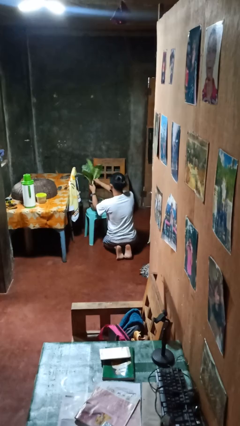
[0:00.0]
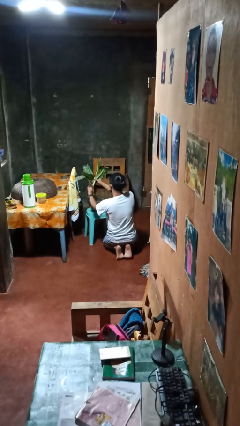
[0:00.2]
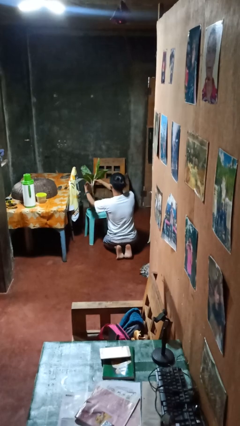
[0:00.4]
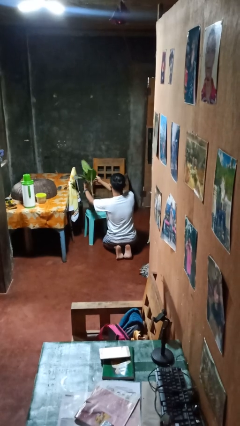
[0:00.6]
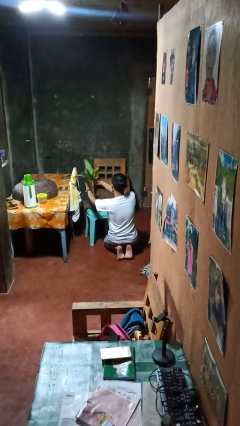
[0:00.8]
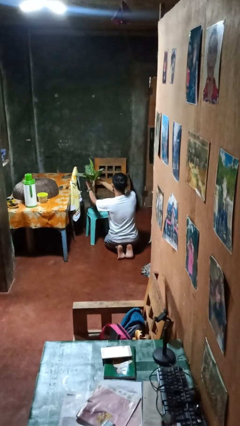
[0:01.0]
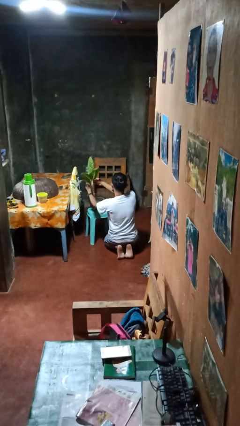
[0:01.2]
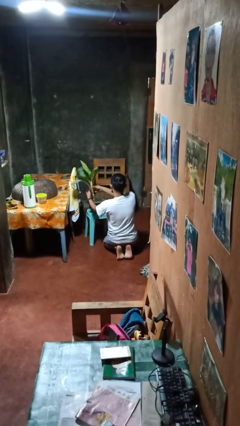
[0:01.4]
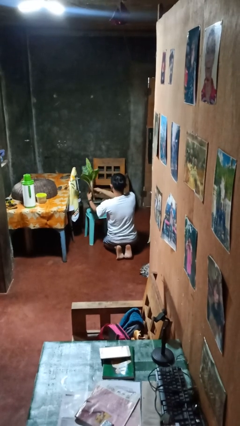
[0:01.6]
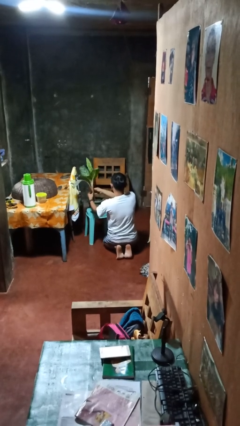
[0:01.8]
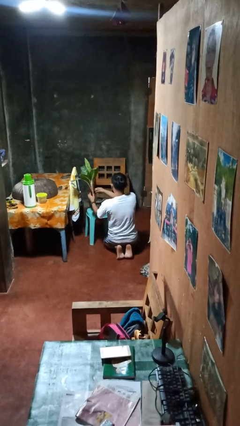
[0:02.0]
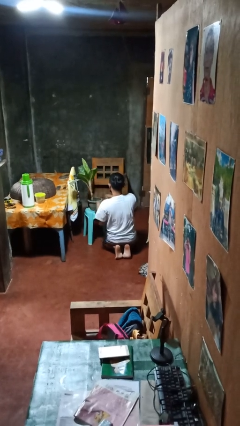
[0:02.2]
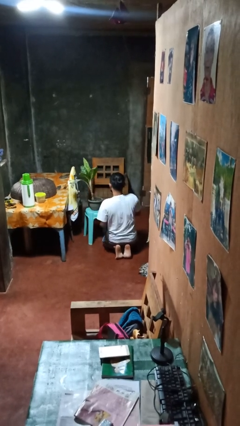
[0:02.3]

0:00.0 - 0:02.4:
person arranges flowers in vase

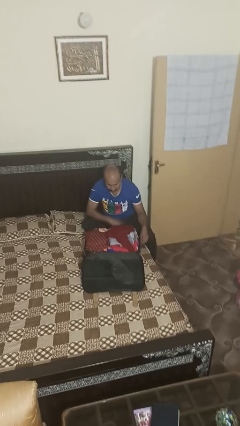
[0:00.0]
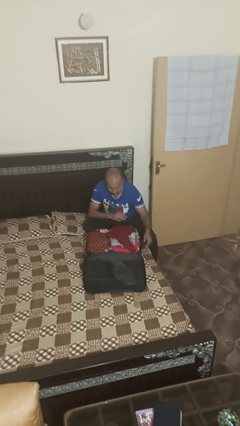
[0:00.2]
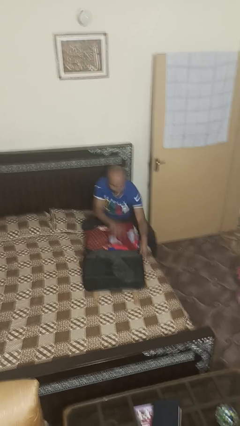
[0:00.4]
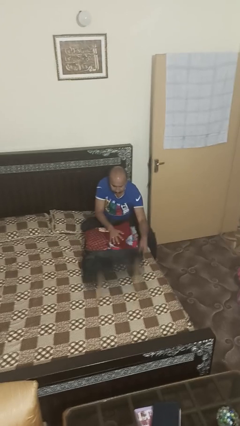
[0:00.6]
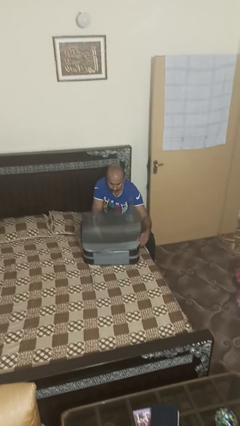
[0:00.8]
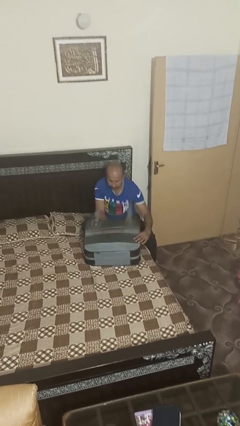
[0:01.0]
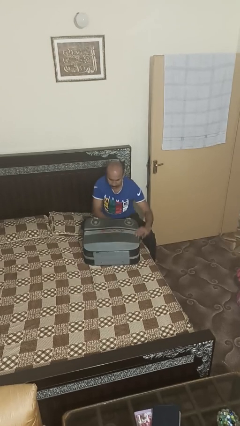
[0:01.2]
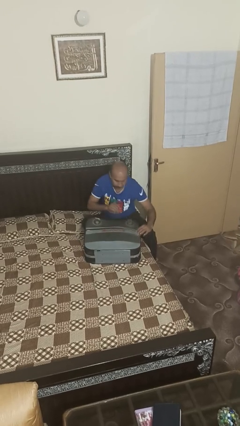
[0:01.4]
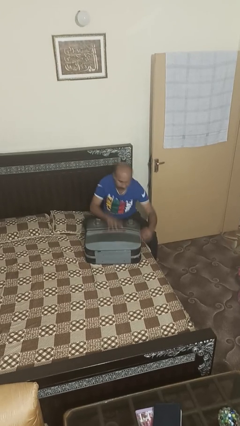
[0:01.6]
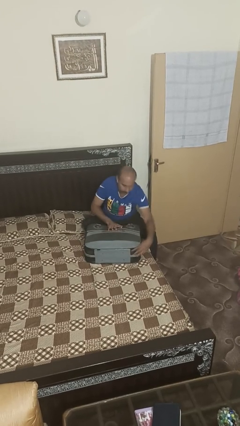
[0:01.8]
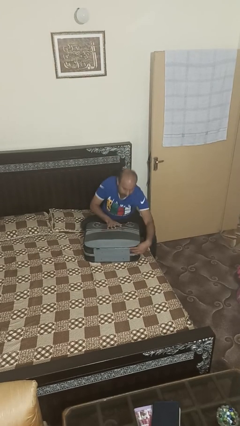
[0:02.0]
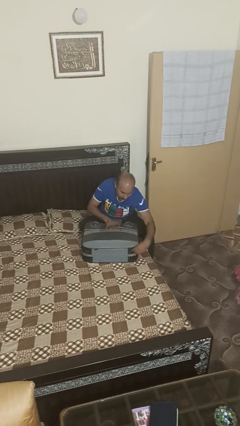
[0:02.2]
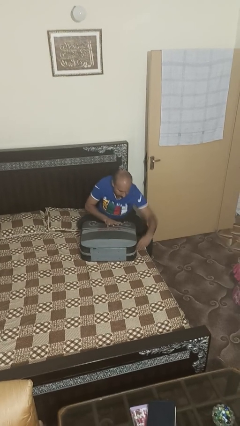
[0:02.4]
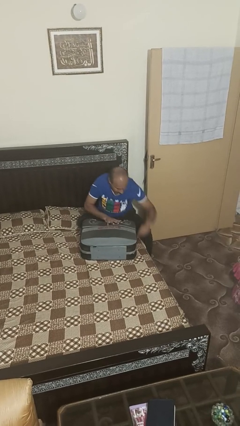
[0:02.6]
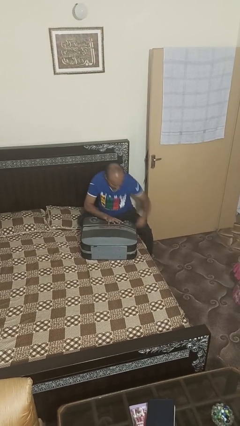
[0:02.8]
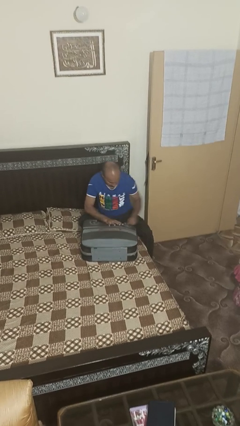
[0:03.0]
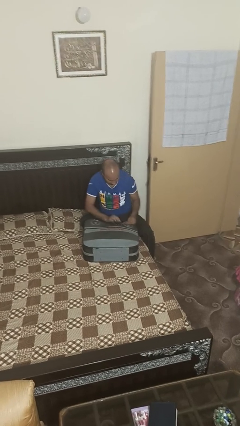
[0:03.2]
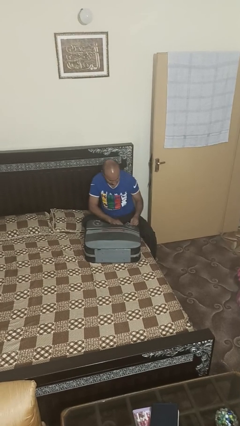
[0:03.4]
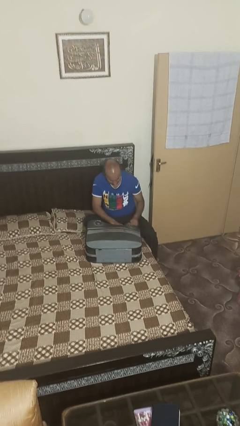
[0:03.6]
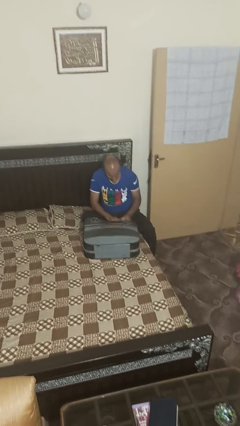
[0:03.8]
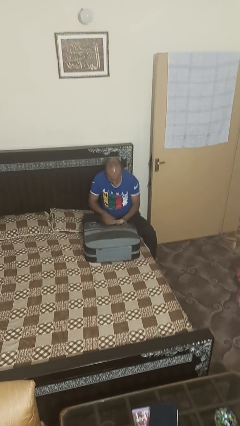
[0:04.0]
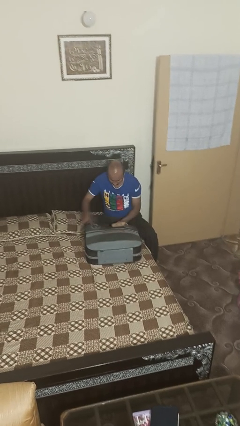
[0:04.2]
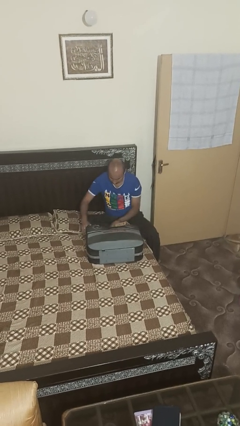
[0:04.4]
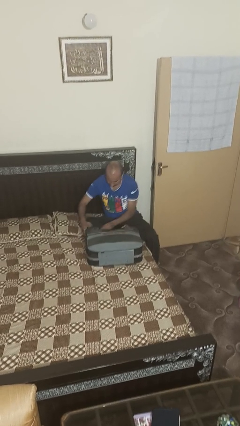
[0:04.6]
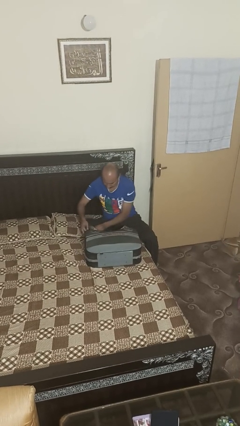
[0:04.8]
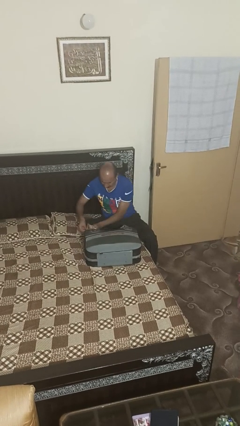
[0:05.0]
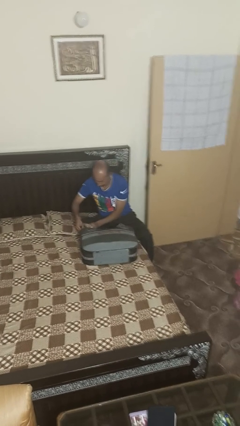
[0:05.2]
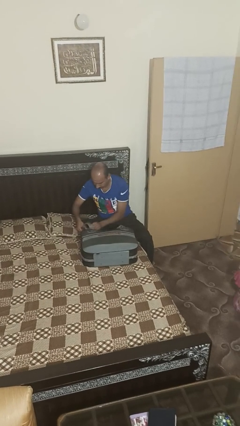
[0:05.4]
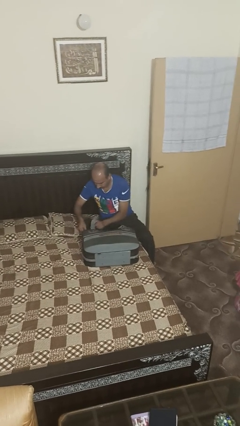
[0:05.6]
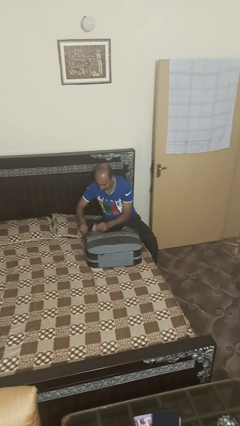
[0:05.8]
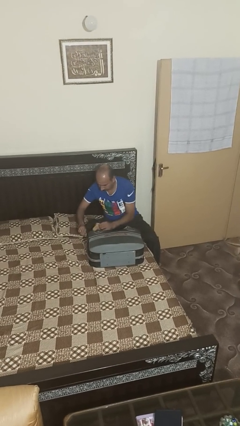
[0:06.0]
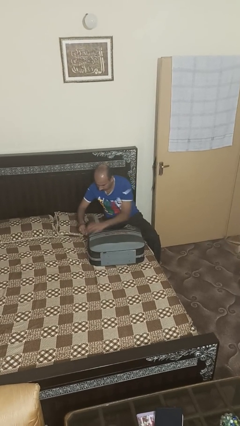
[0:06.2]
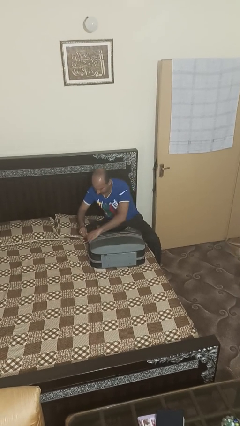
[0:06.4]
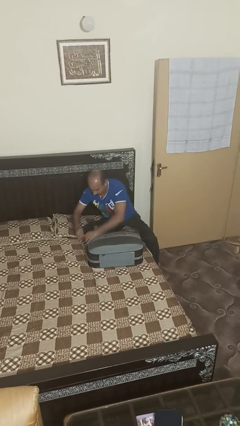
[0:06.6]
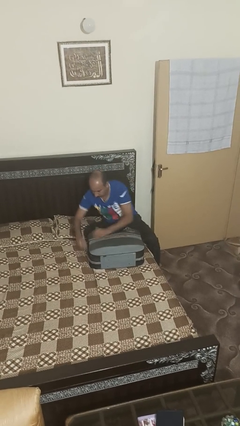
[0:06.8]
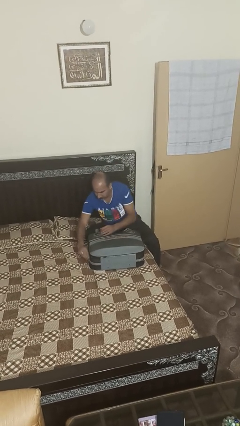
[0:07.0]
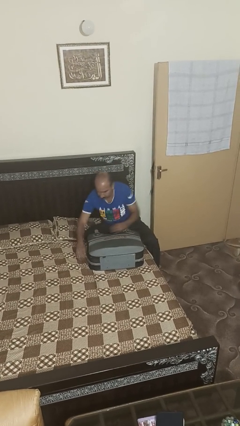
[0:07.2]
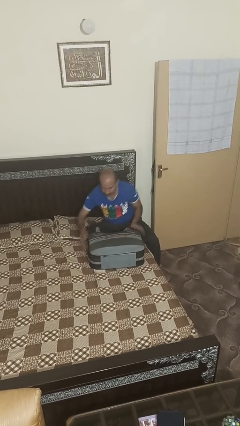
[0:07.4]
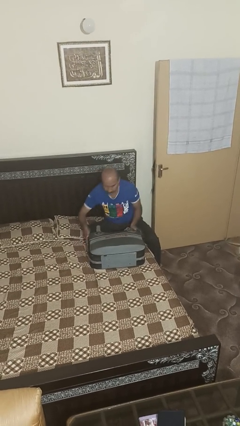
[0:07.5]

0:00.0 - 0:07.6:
person closes suitcase

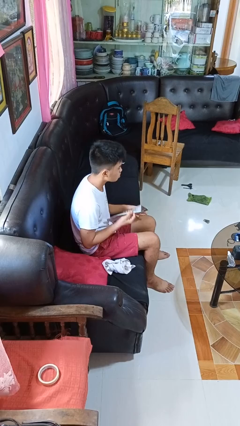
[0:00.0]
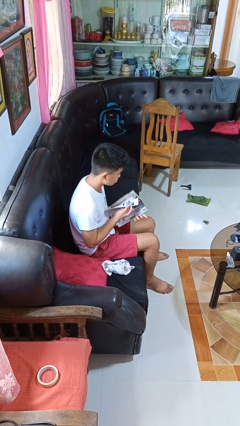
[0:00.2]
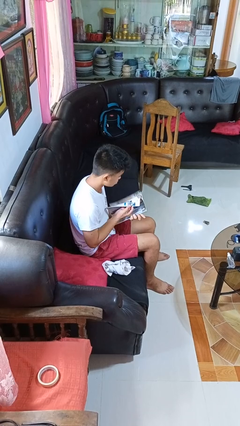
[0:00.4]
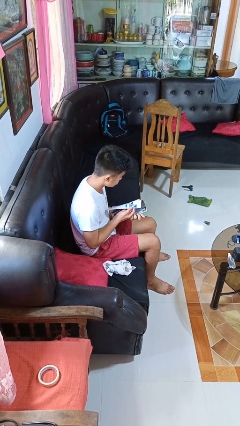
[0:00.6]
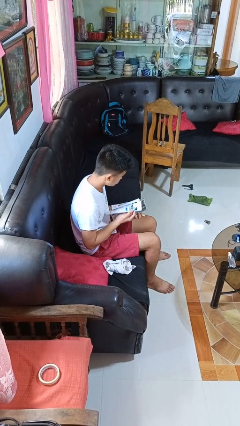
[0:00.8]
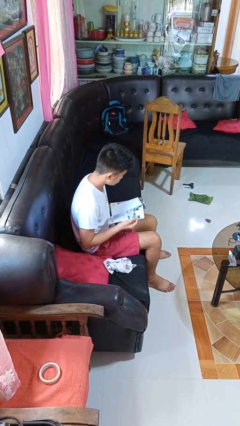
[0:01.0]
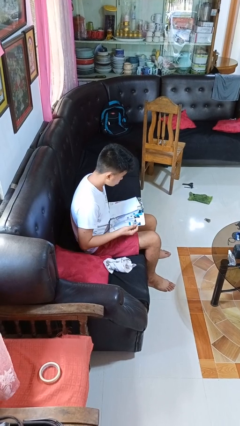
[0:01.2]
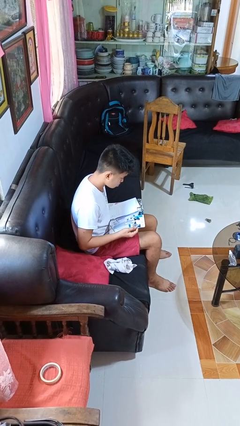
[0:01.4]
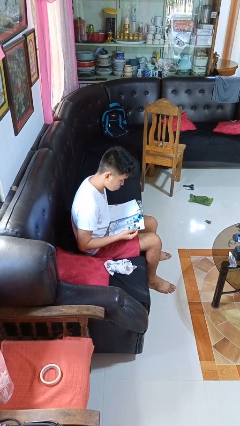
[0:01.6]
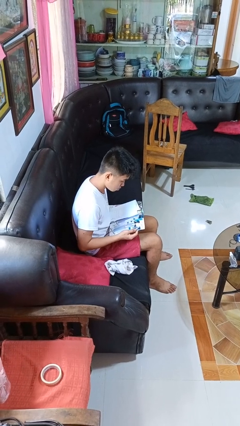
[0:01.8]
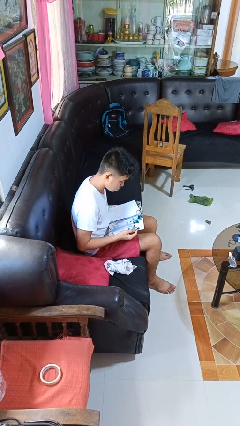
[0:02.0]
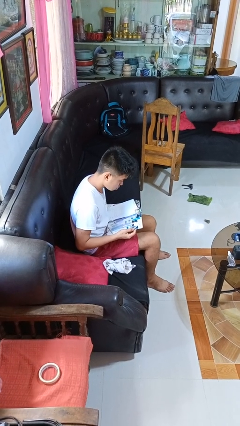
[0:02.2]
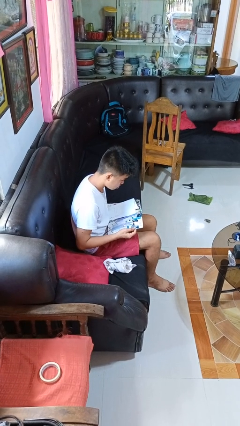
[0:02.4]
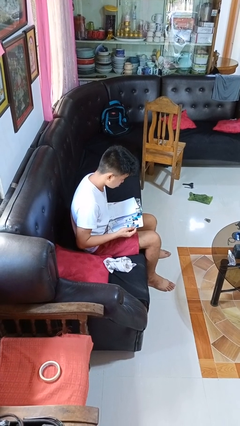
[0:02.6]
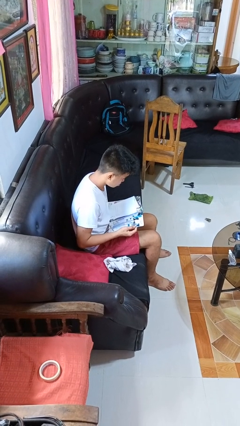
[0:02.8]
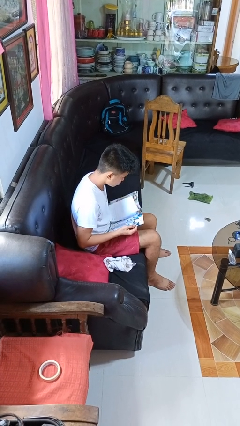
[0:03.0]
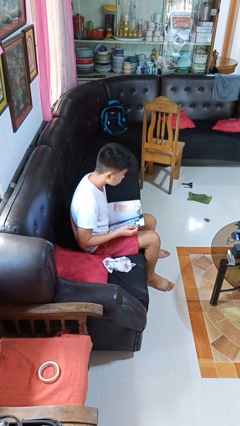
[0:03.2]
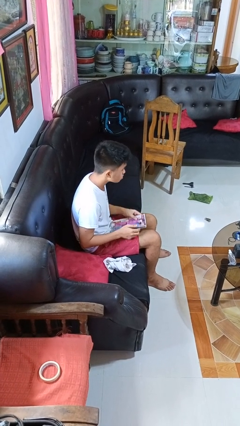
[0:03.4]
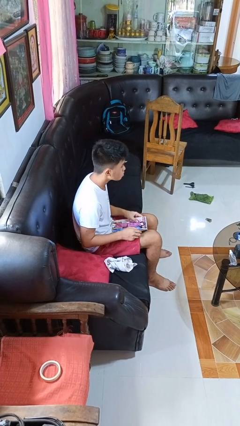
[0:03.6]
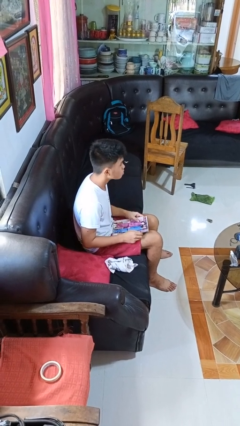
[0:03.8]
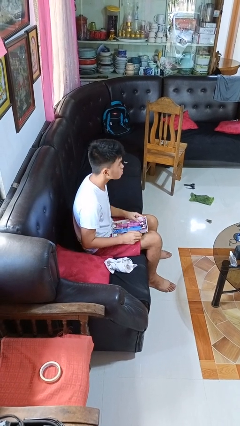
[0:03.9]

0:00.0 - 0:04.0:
person reads magazine

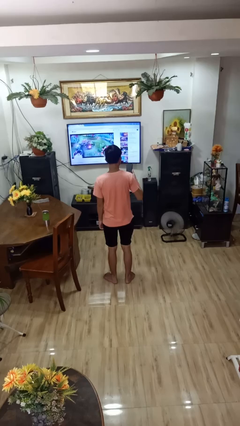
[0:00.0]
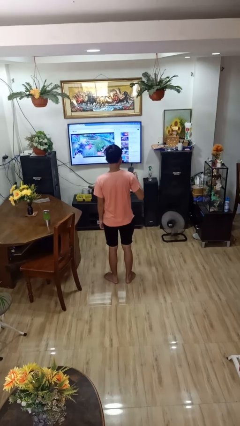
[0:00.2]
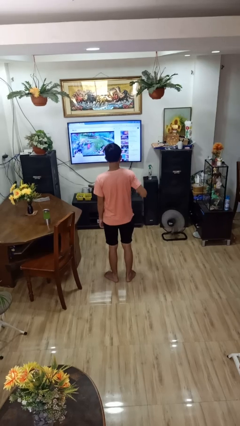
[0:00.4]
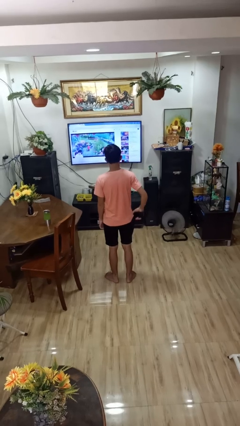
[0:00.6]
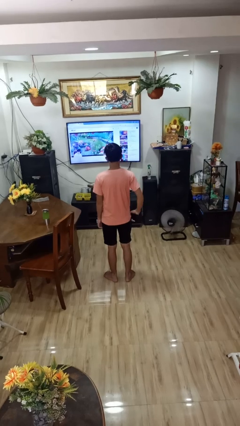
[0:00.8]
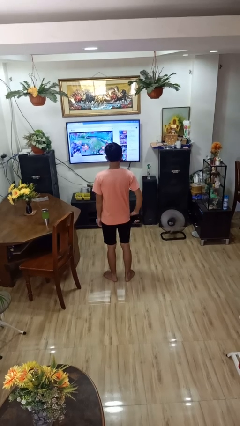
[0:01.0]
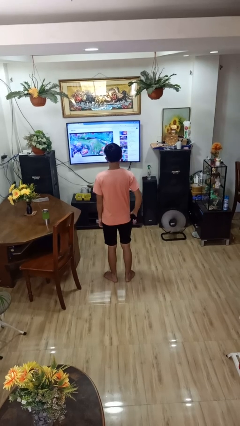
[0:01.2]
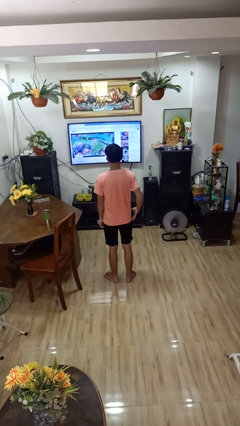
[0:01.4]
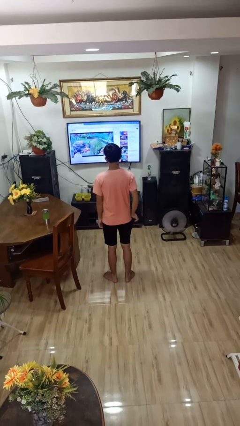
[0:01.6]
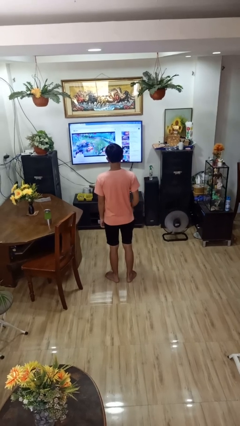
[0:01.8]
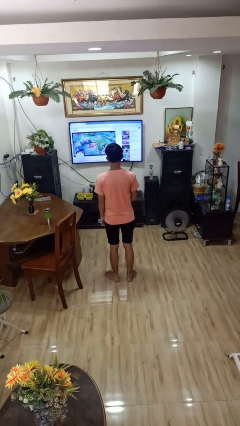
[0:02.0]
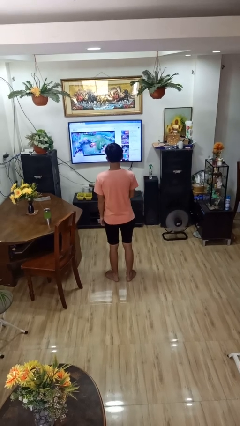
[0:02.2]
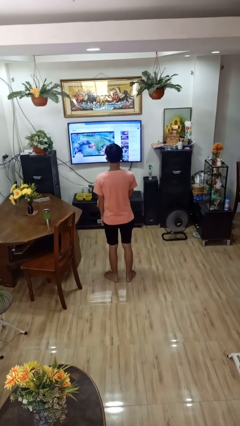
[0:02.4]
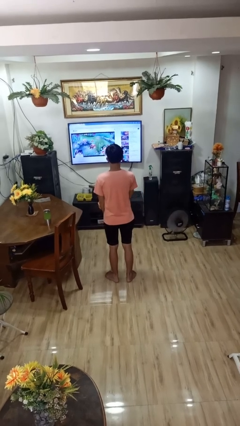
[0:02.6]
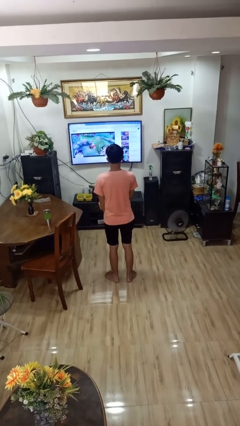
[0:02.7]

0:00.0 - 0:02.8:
person puts phone into pocket

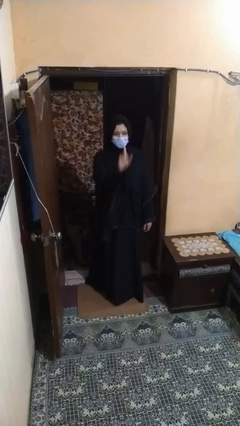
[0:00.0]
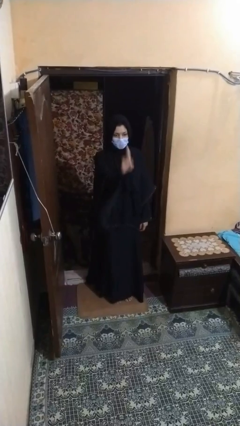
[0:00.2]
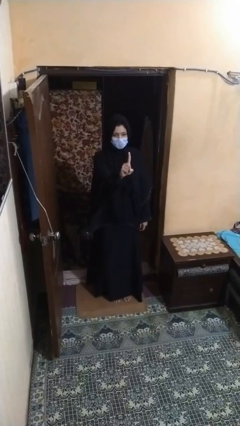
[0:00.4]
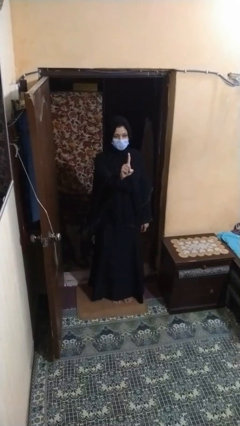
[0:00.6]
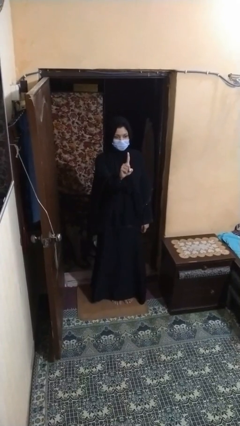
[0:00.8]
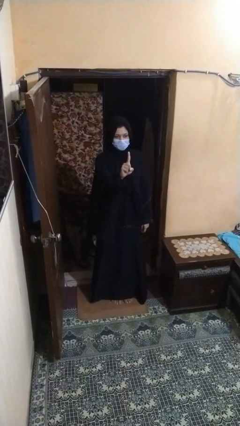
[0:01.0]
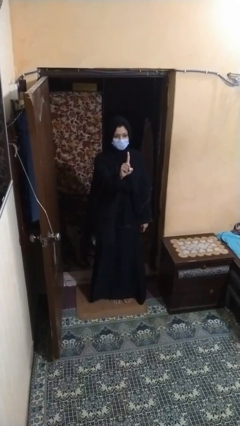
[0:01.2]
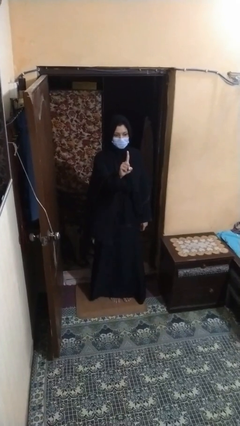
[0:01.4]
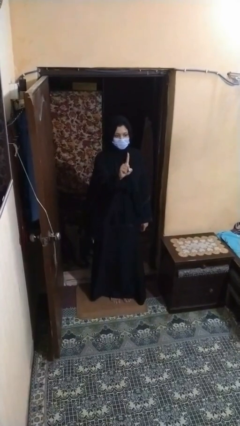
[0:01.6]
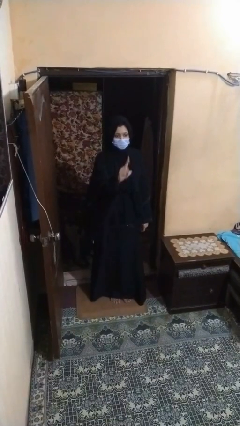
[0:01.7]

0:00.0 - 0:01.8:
person gestures number one
